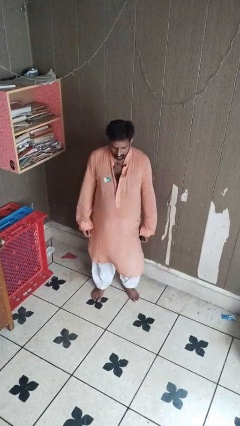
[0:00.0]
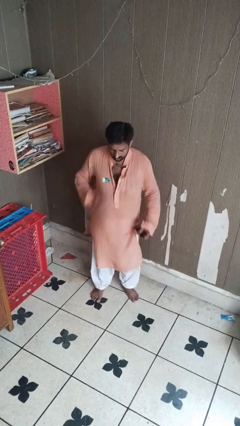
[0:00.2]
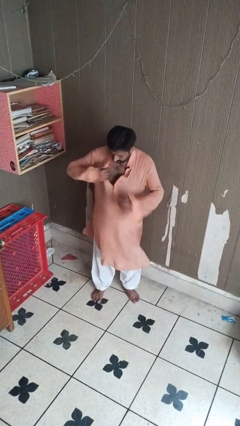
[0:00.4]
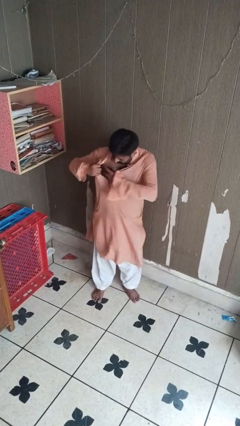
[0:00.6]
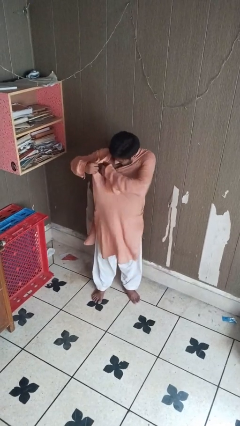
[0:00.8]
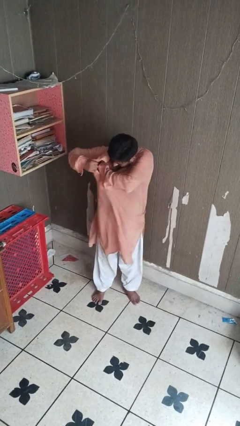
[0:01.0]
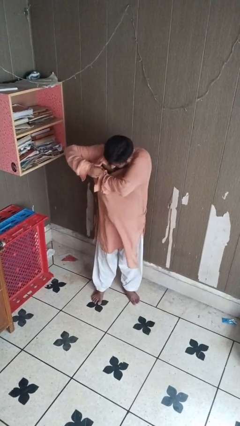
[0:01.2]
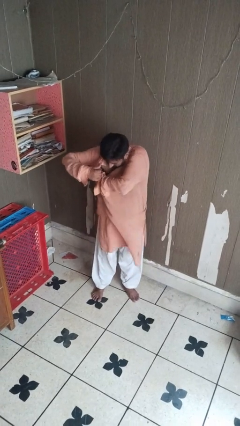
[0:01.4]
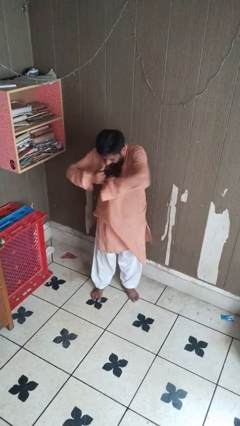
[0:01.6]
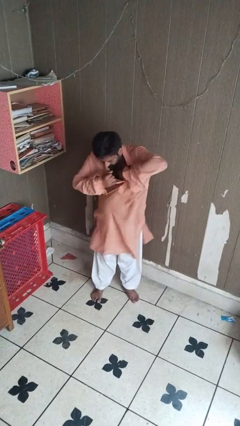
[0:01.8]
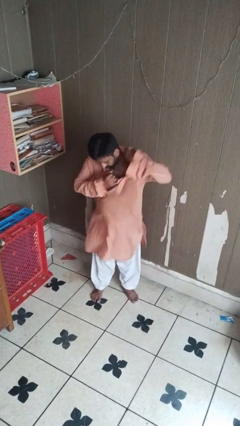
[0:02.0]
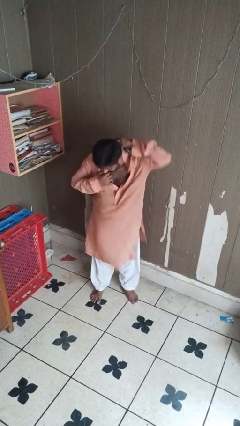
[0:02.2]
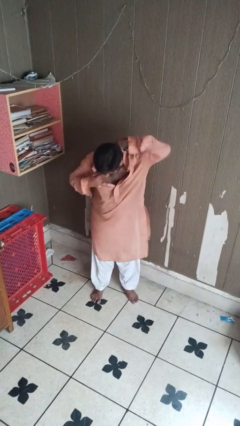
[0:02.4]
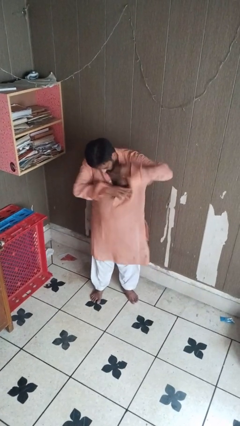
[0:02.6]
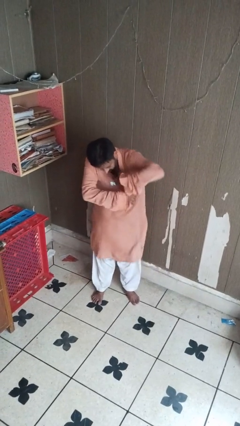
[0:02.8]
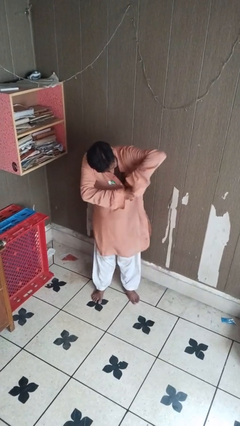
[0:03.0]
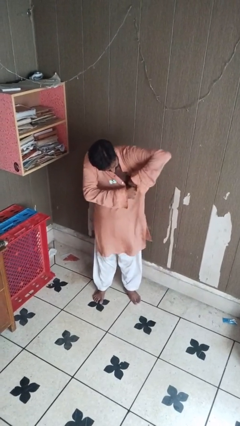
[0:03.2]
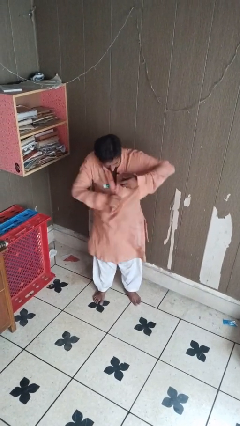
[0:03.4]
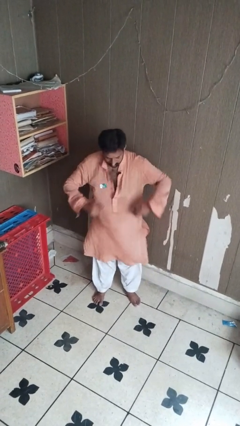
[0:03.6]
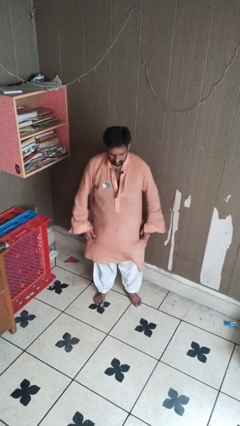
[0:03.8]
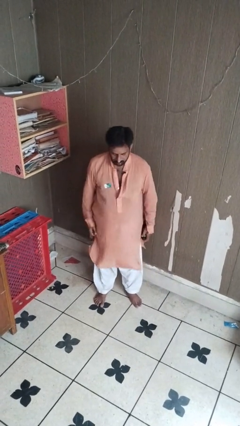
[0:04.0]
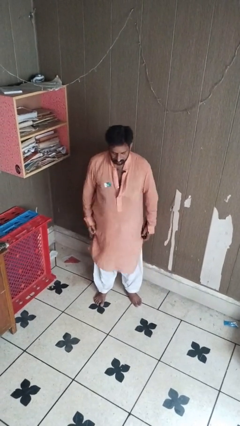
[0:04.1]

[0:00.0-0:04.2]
person applies deodorant

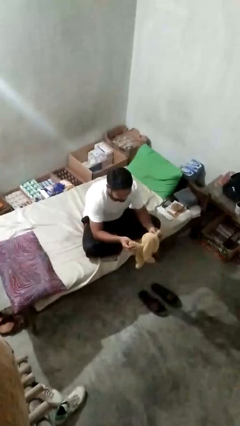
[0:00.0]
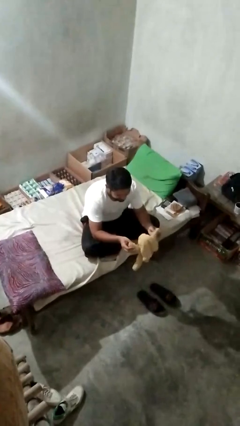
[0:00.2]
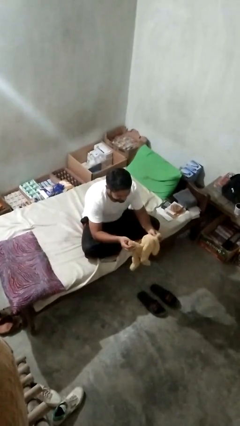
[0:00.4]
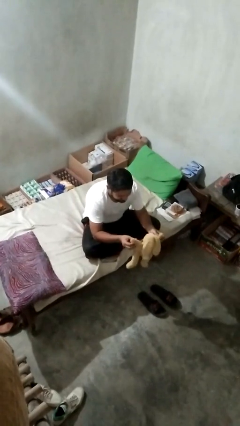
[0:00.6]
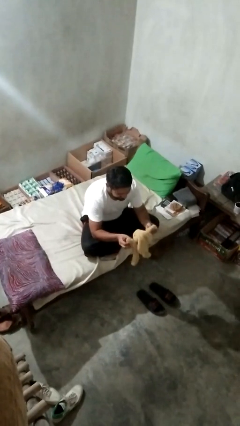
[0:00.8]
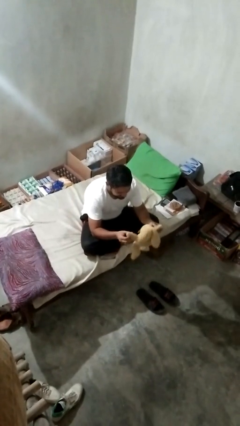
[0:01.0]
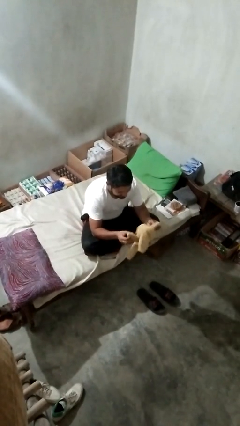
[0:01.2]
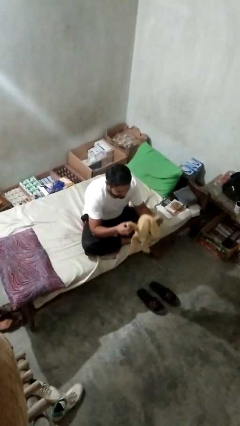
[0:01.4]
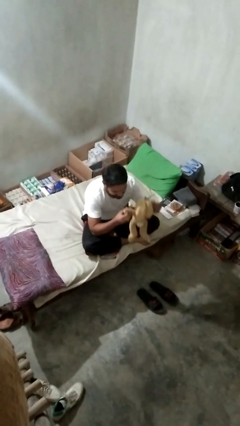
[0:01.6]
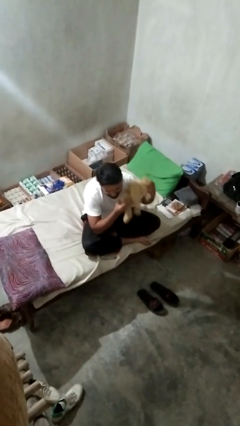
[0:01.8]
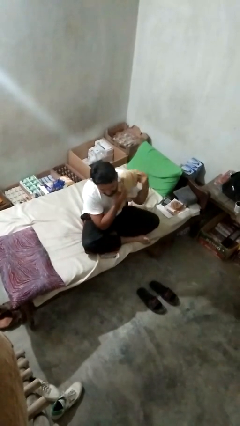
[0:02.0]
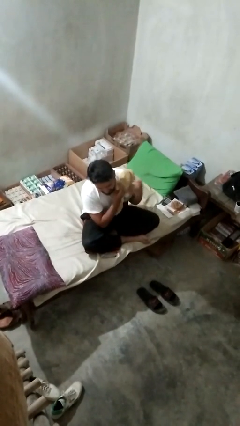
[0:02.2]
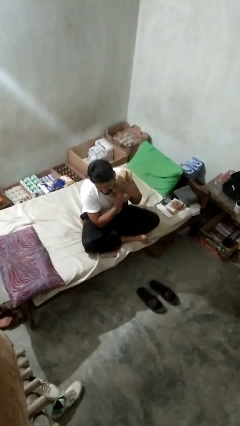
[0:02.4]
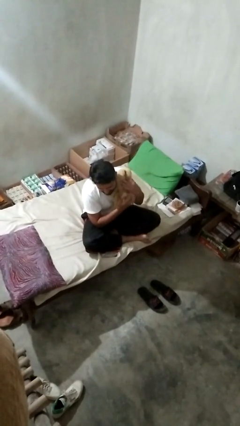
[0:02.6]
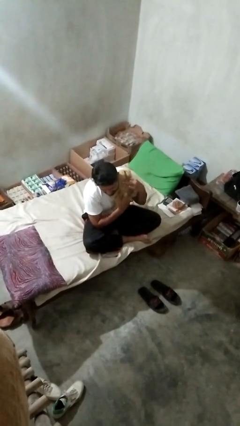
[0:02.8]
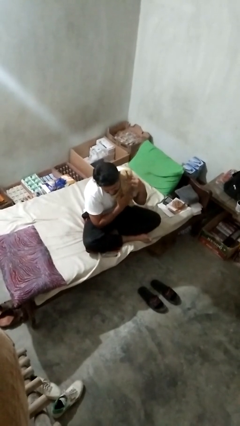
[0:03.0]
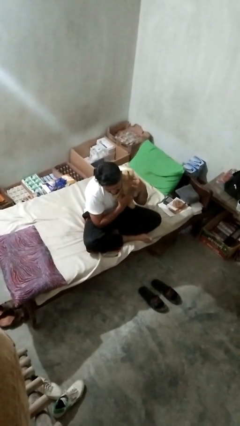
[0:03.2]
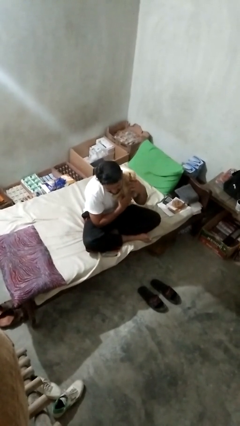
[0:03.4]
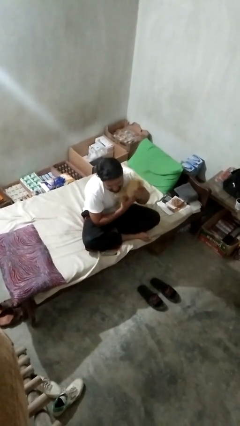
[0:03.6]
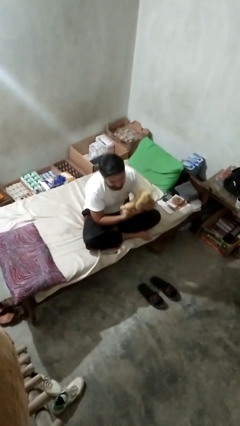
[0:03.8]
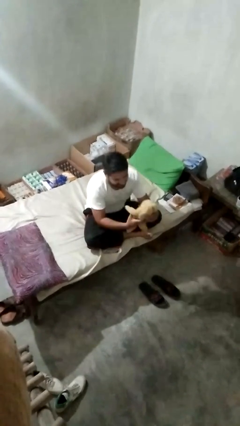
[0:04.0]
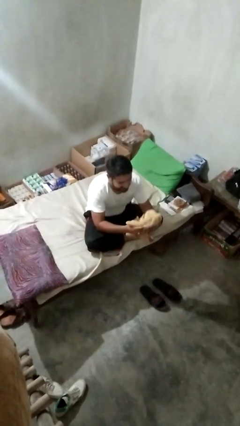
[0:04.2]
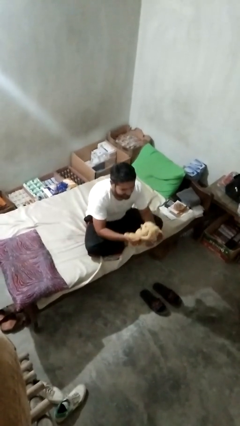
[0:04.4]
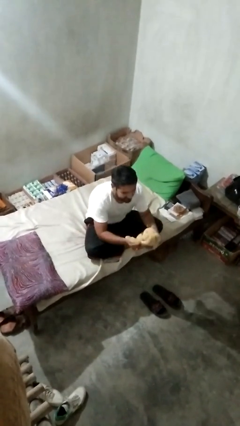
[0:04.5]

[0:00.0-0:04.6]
person hugs stuffed animal

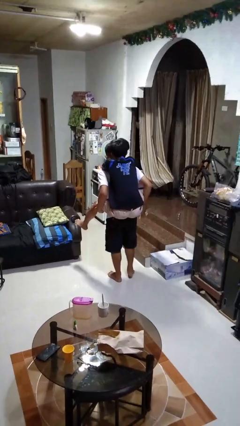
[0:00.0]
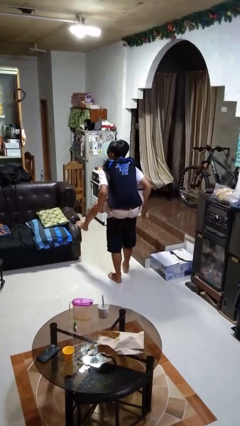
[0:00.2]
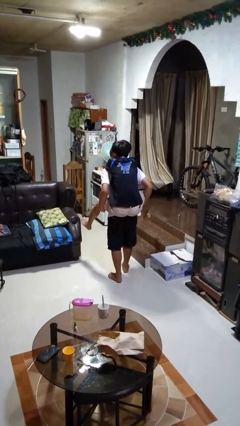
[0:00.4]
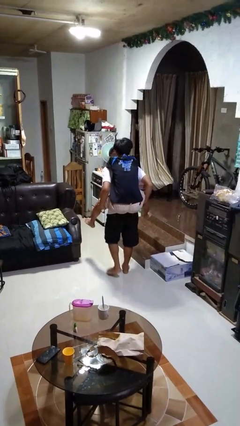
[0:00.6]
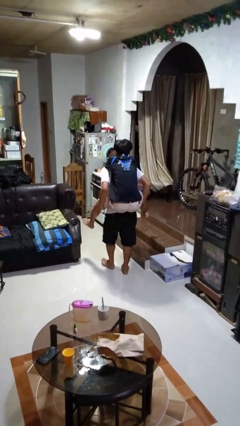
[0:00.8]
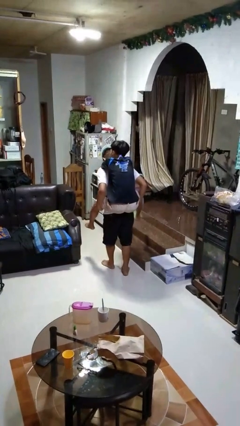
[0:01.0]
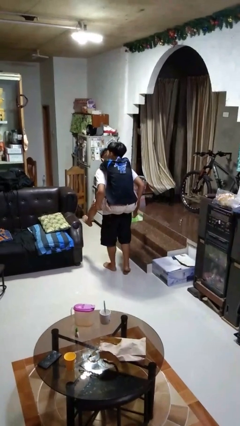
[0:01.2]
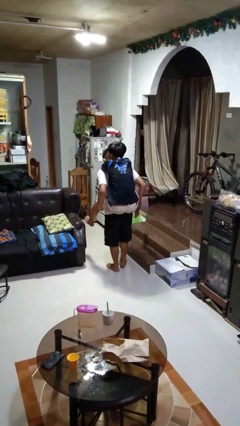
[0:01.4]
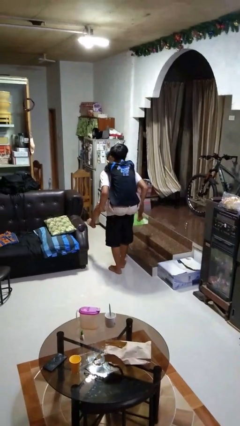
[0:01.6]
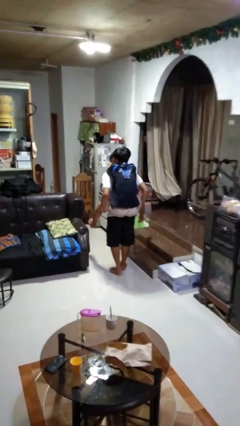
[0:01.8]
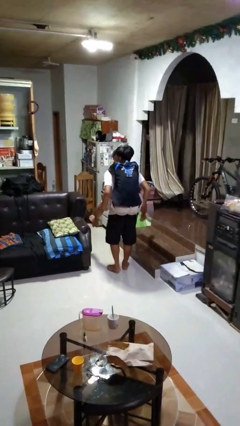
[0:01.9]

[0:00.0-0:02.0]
person carries person on back

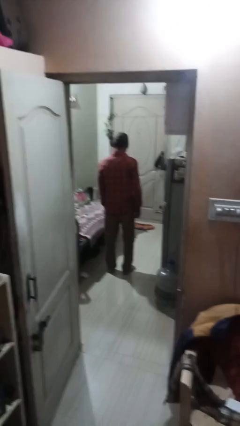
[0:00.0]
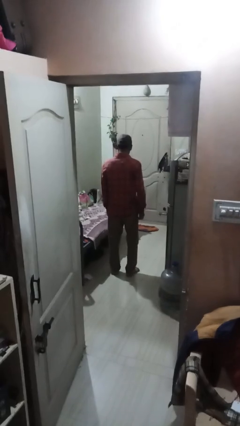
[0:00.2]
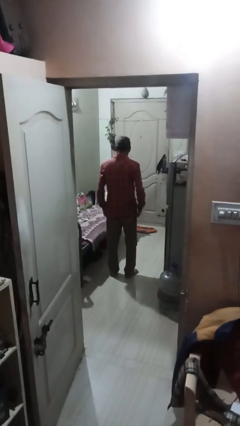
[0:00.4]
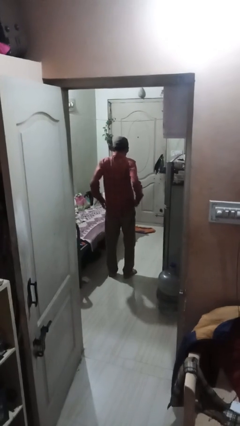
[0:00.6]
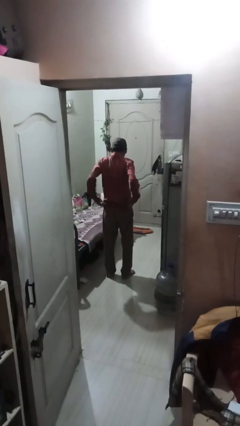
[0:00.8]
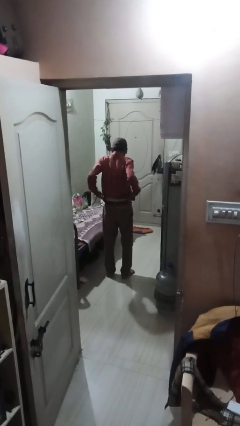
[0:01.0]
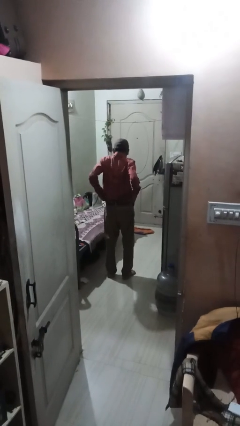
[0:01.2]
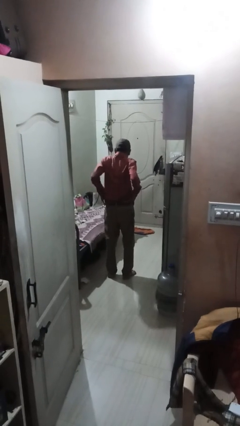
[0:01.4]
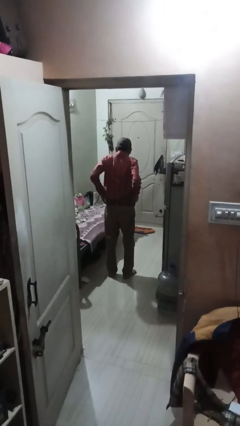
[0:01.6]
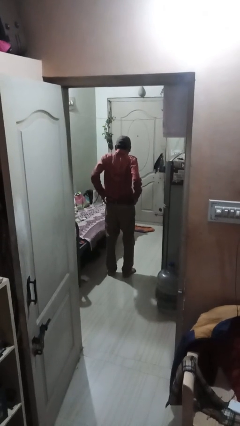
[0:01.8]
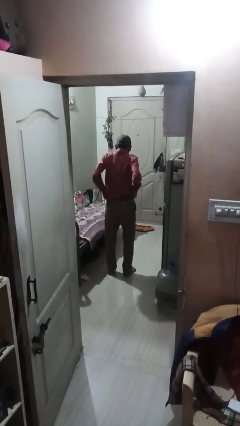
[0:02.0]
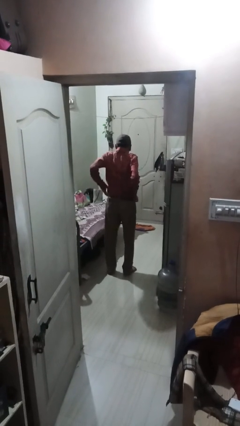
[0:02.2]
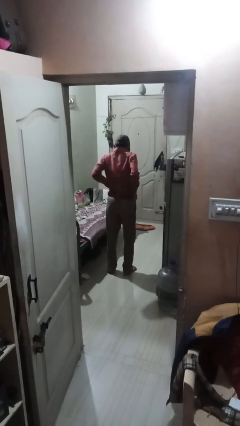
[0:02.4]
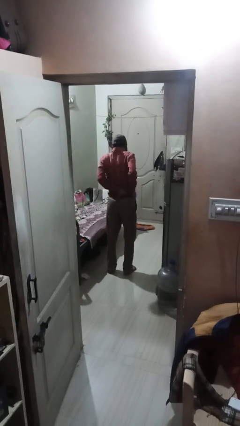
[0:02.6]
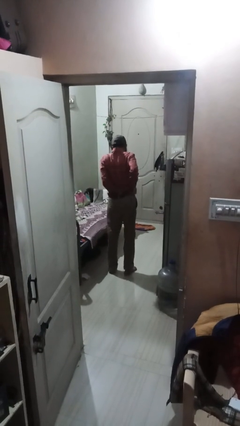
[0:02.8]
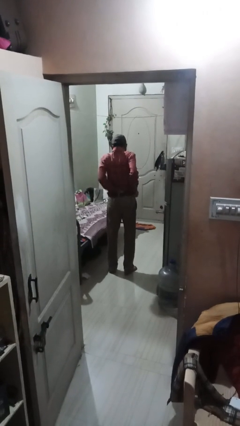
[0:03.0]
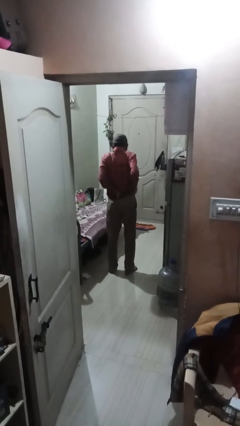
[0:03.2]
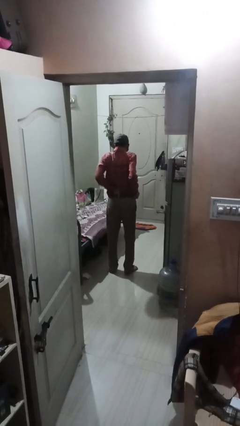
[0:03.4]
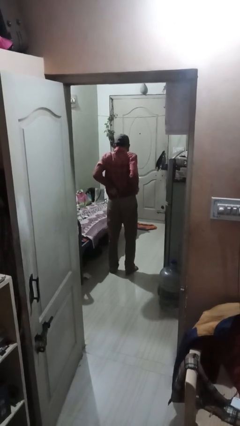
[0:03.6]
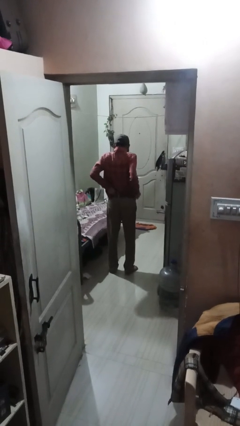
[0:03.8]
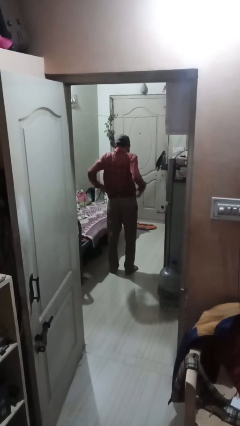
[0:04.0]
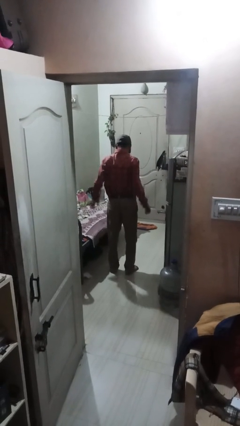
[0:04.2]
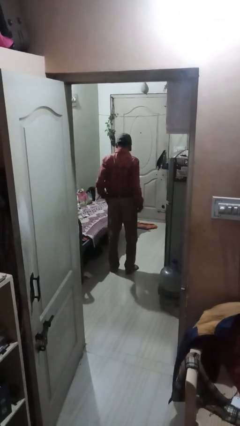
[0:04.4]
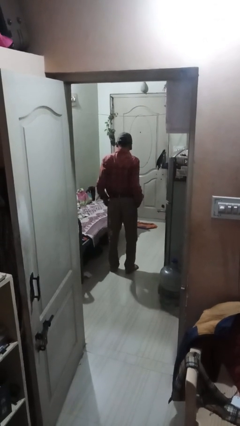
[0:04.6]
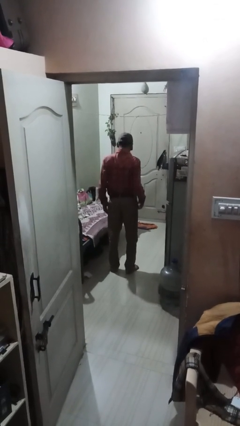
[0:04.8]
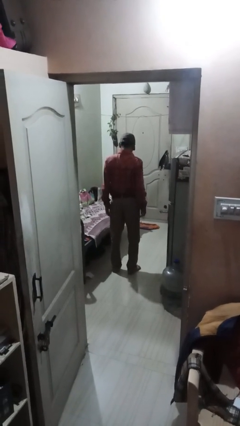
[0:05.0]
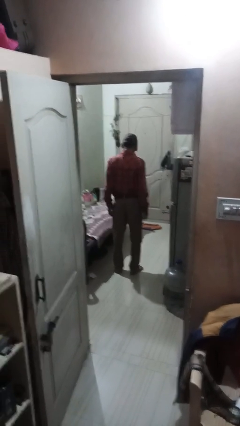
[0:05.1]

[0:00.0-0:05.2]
person tucks in shirt

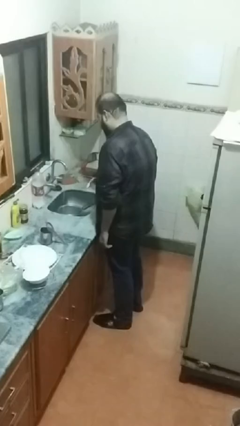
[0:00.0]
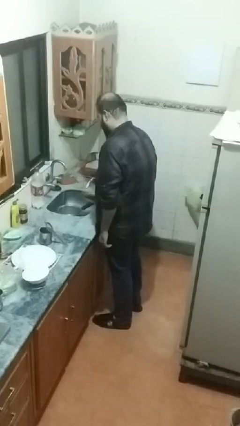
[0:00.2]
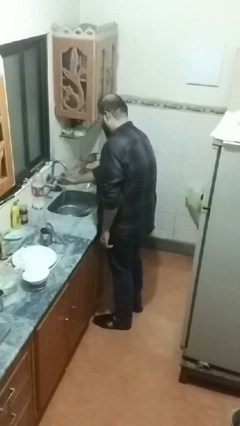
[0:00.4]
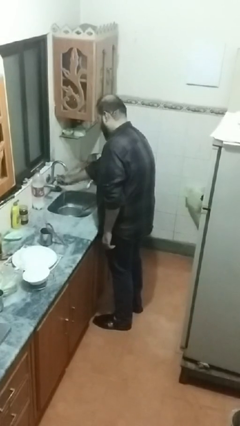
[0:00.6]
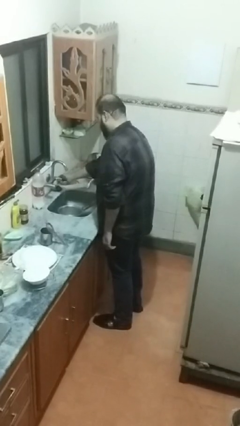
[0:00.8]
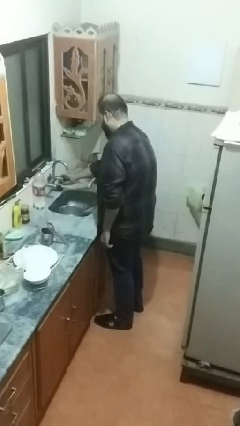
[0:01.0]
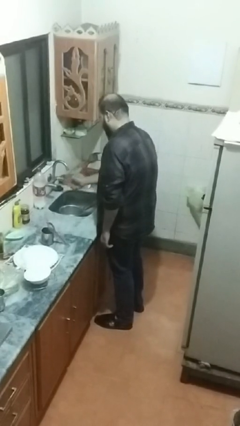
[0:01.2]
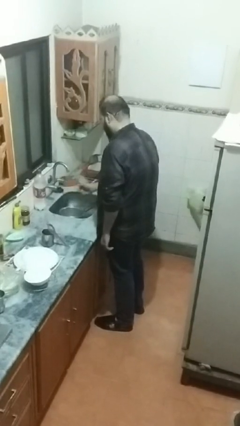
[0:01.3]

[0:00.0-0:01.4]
person turns off faucet

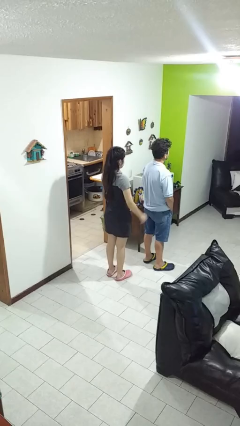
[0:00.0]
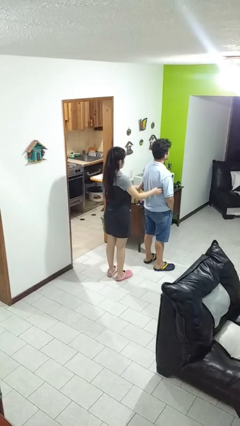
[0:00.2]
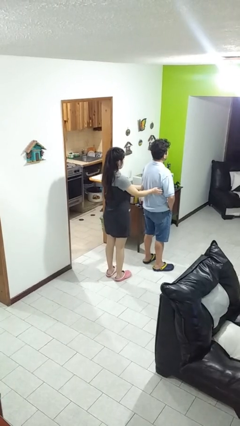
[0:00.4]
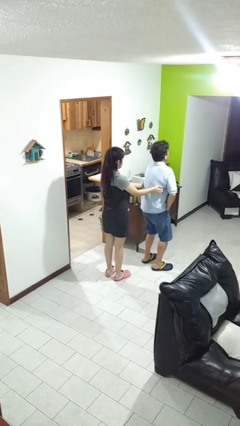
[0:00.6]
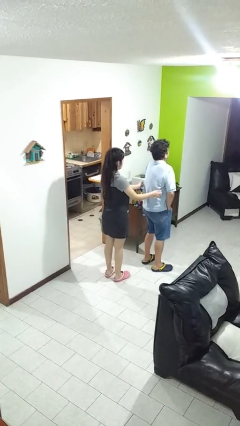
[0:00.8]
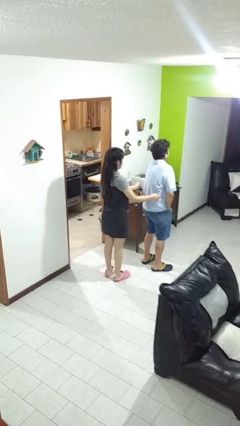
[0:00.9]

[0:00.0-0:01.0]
person tickles person
